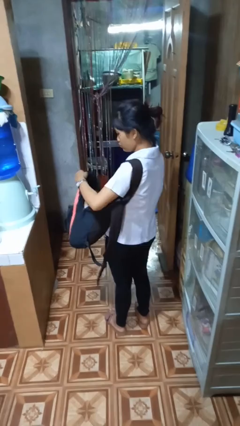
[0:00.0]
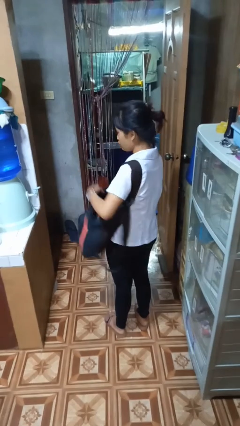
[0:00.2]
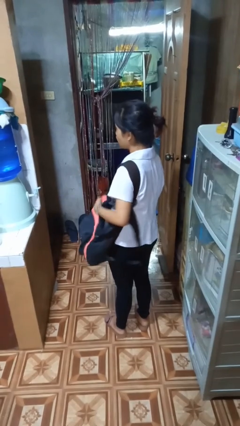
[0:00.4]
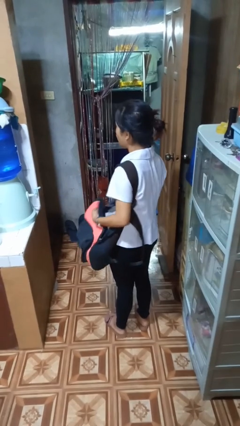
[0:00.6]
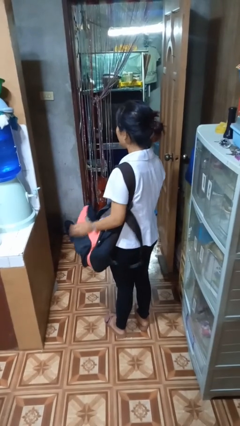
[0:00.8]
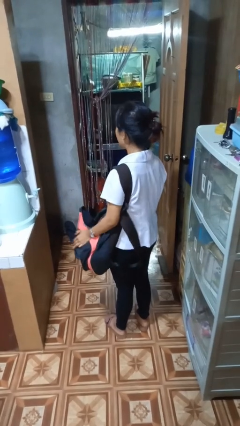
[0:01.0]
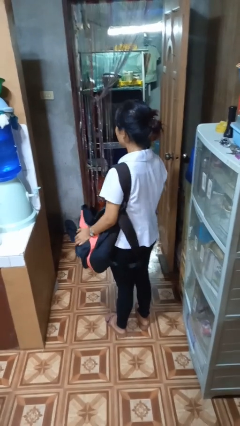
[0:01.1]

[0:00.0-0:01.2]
person puts object into backpack

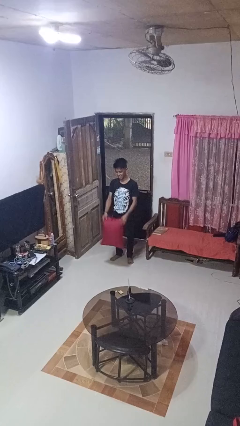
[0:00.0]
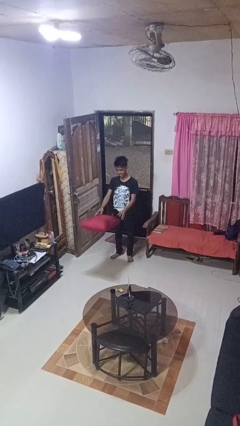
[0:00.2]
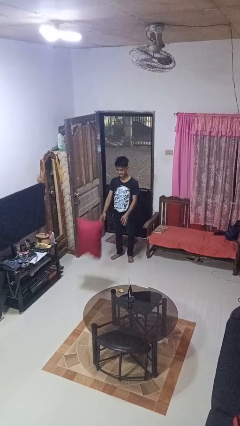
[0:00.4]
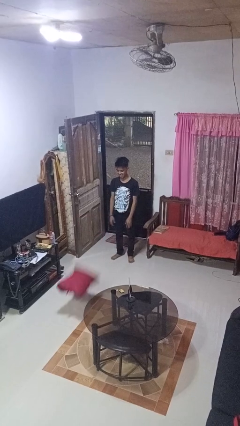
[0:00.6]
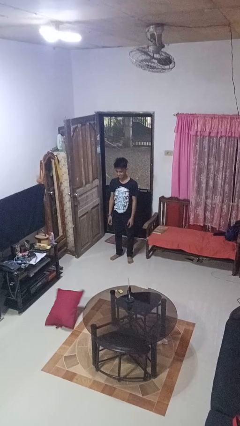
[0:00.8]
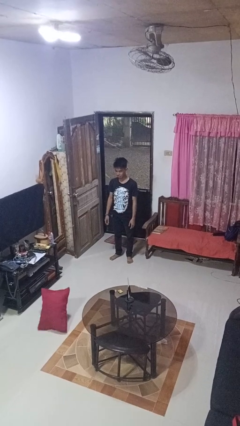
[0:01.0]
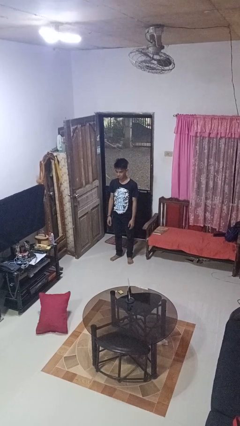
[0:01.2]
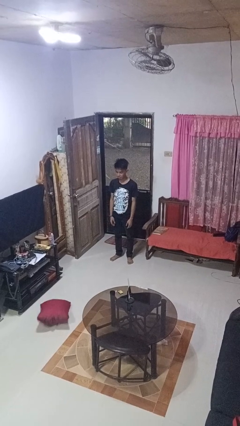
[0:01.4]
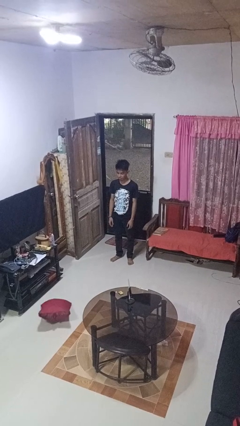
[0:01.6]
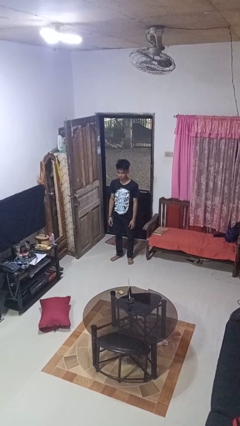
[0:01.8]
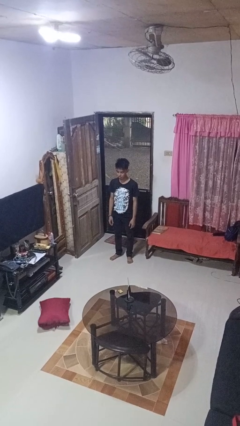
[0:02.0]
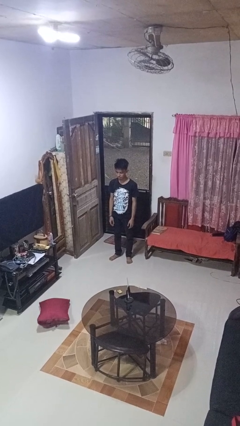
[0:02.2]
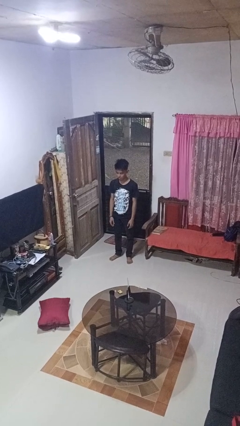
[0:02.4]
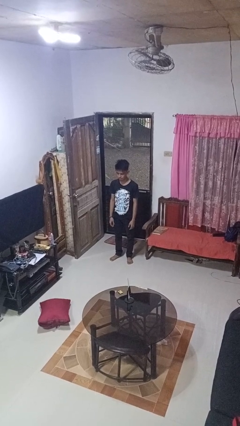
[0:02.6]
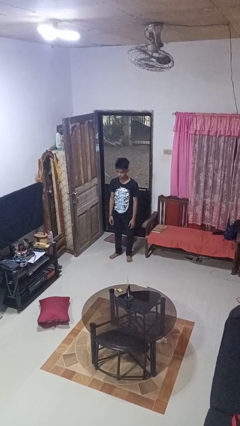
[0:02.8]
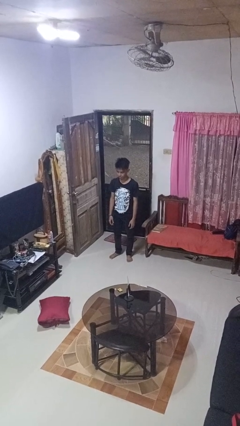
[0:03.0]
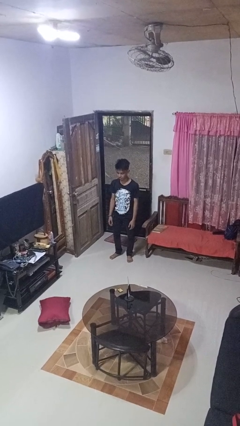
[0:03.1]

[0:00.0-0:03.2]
person throws object to ground

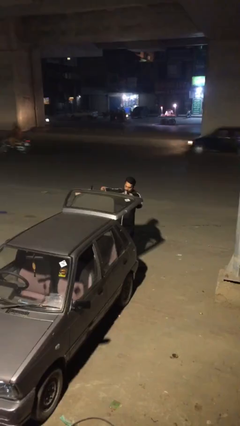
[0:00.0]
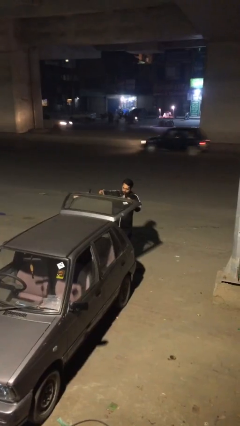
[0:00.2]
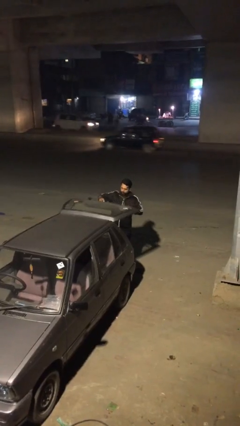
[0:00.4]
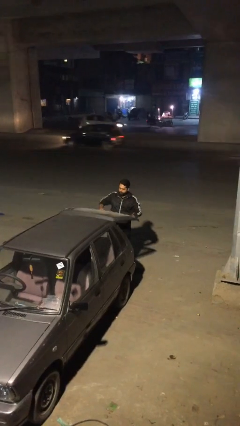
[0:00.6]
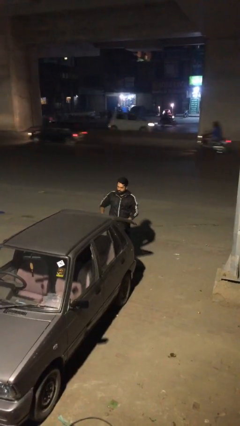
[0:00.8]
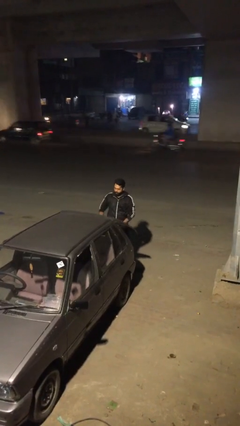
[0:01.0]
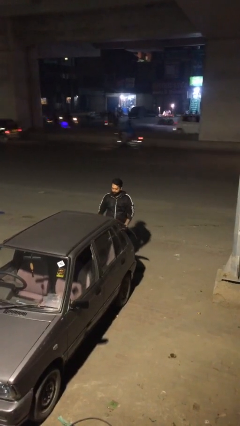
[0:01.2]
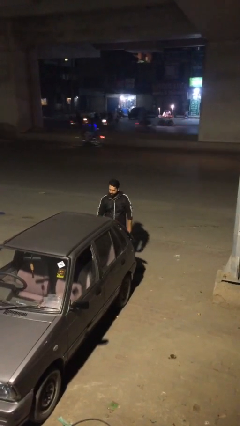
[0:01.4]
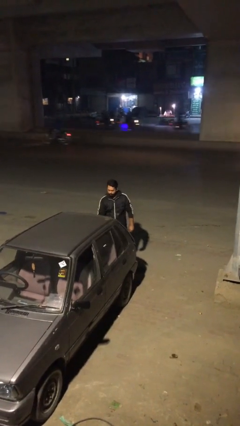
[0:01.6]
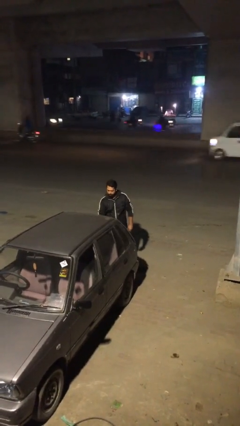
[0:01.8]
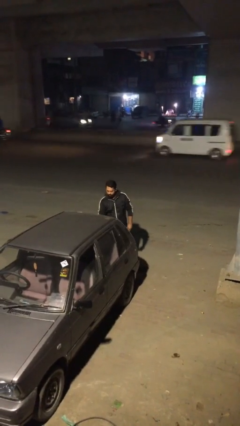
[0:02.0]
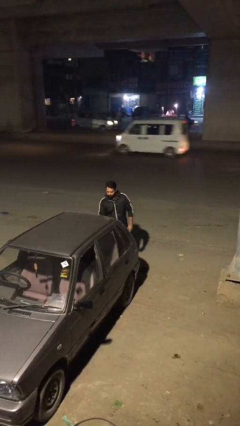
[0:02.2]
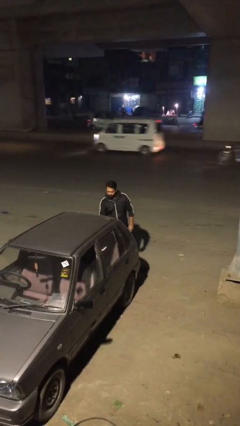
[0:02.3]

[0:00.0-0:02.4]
person closes car trunk

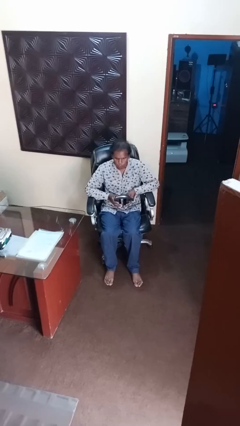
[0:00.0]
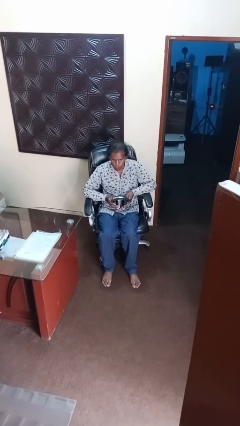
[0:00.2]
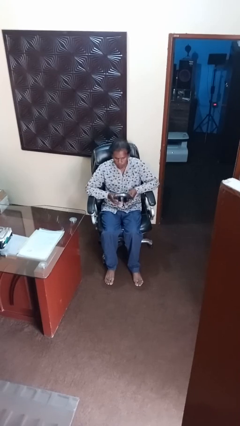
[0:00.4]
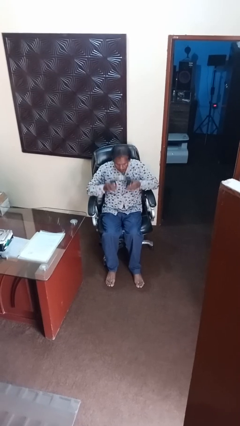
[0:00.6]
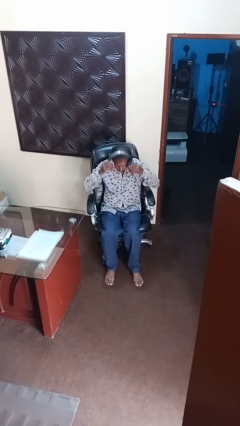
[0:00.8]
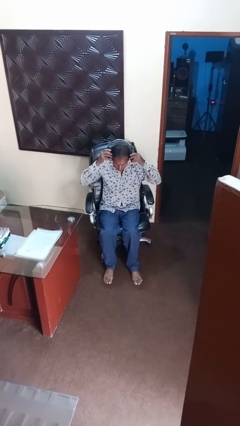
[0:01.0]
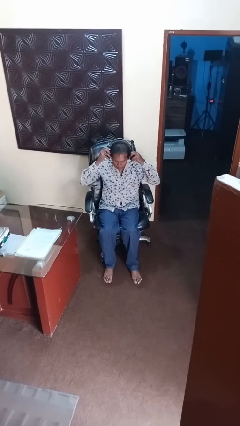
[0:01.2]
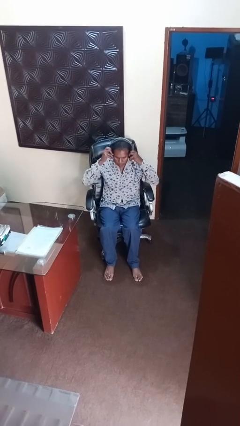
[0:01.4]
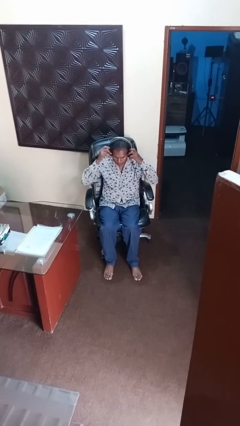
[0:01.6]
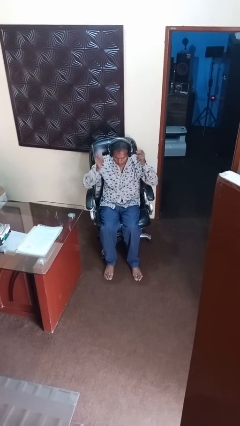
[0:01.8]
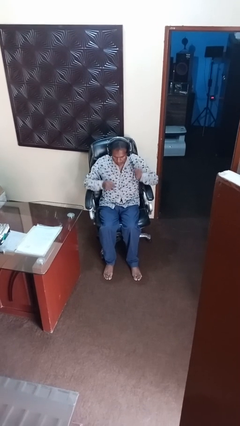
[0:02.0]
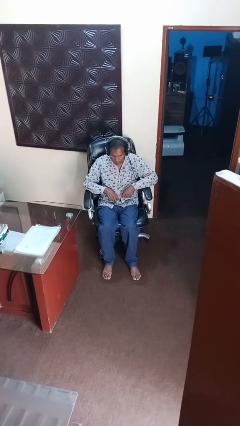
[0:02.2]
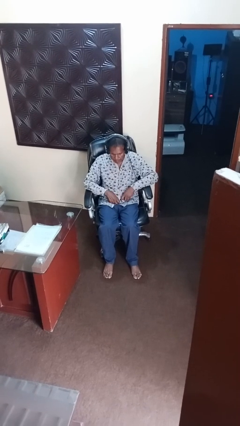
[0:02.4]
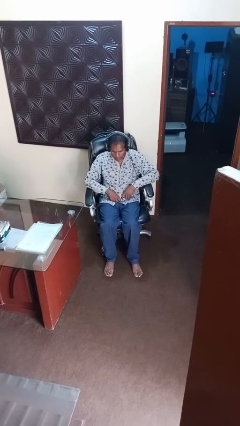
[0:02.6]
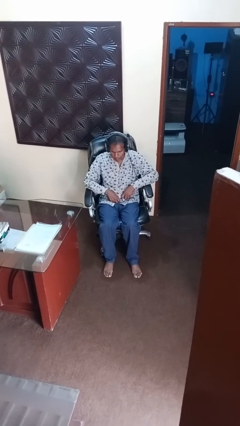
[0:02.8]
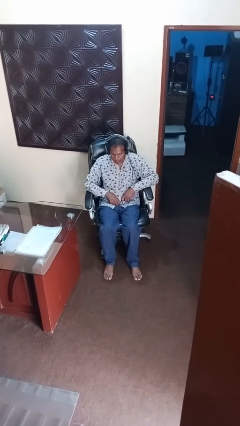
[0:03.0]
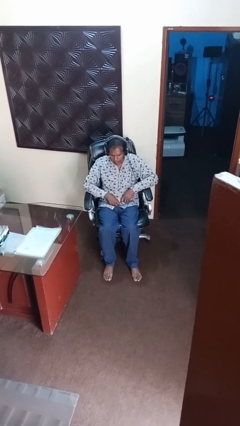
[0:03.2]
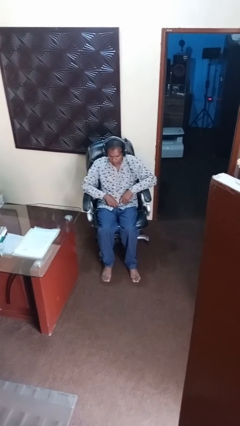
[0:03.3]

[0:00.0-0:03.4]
person puts on headphones

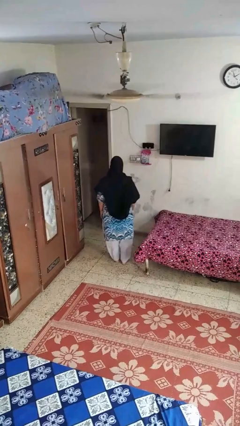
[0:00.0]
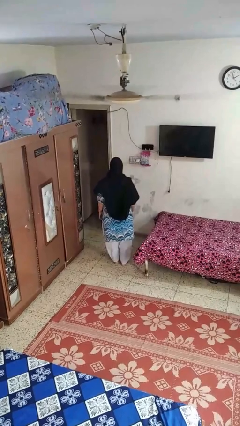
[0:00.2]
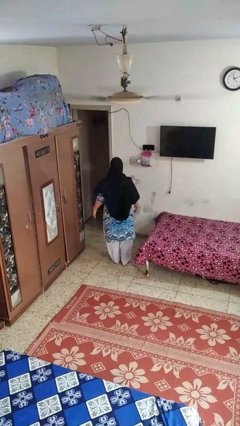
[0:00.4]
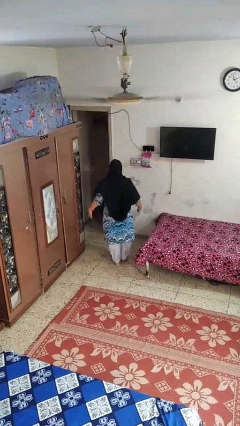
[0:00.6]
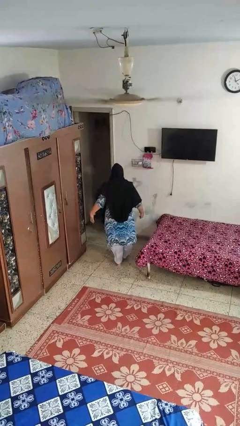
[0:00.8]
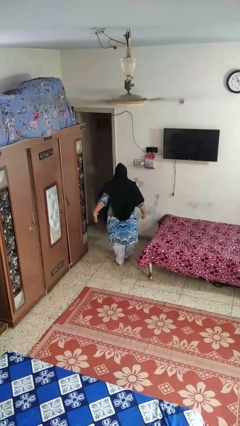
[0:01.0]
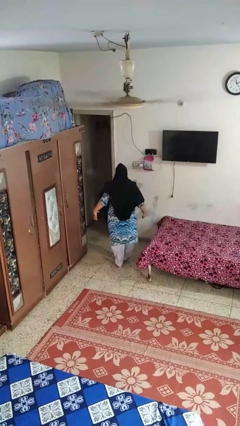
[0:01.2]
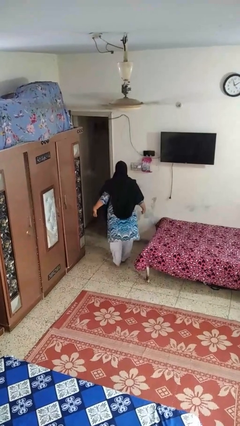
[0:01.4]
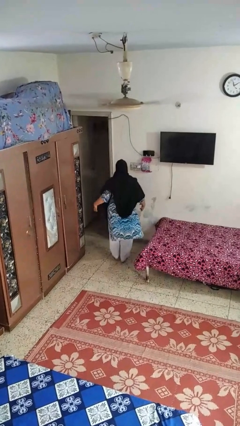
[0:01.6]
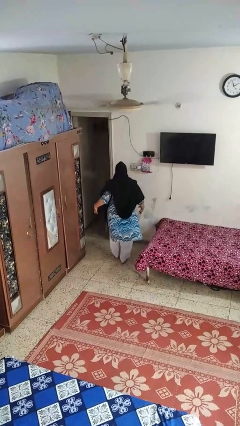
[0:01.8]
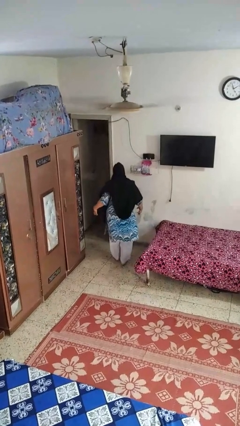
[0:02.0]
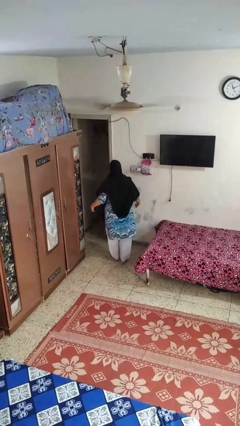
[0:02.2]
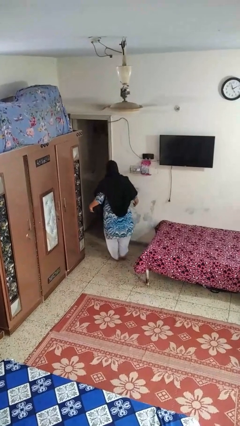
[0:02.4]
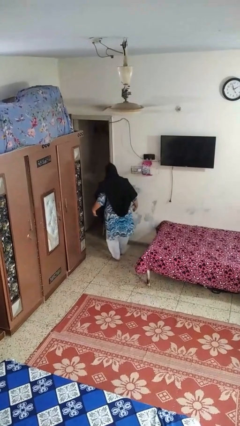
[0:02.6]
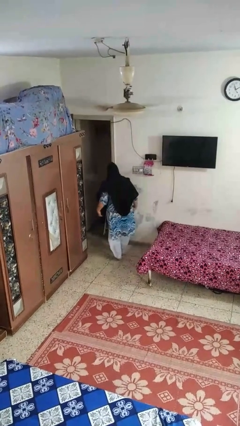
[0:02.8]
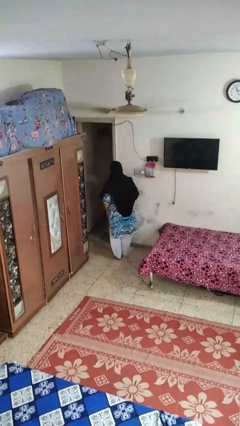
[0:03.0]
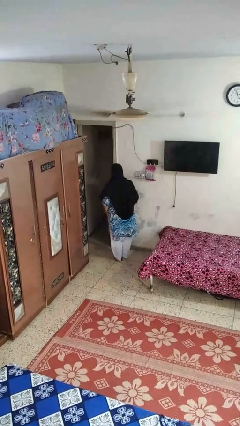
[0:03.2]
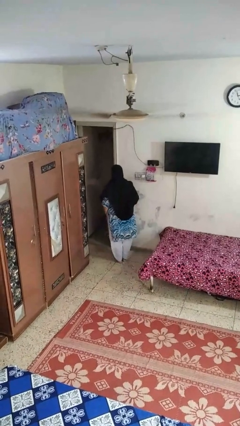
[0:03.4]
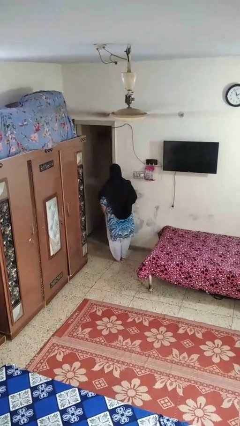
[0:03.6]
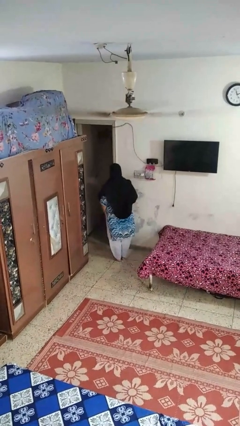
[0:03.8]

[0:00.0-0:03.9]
person walks tiptoe

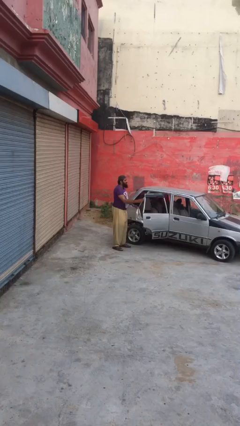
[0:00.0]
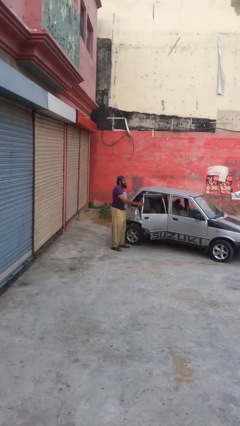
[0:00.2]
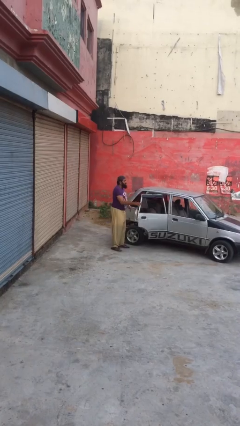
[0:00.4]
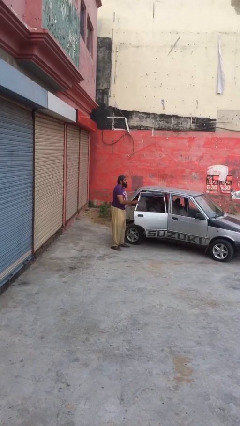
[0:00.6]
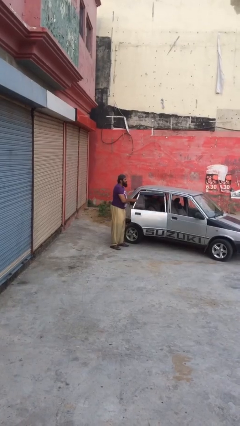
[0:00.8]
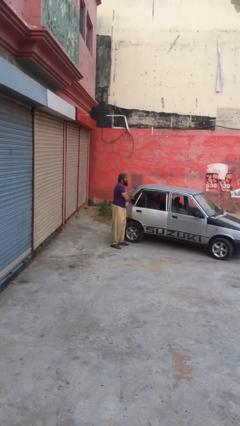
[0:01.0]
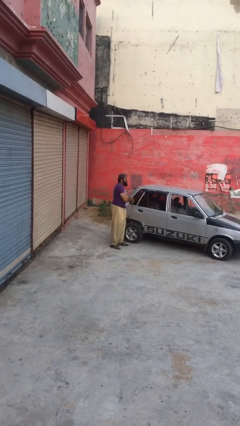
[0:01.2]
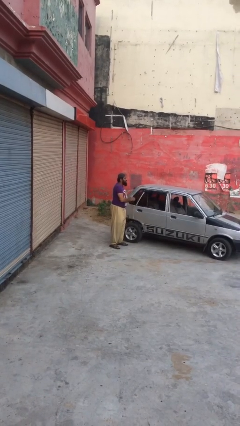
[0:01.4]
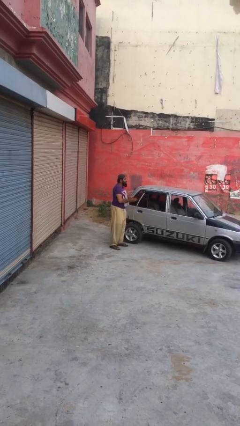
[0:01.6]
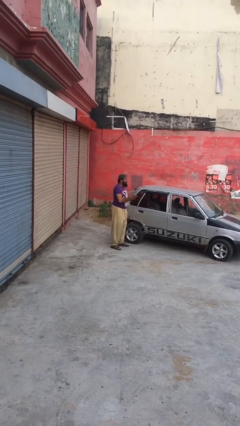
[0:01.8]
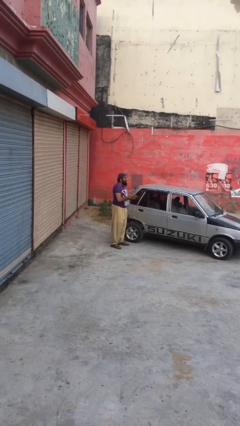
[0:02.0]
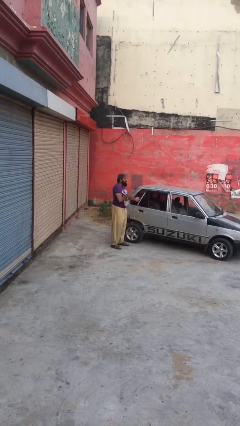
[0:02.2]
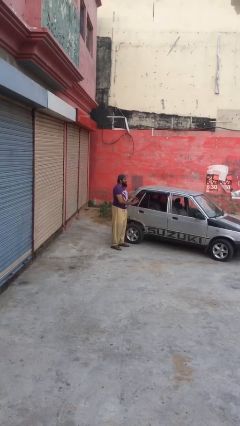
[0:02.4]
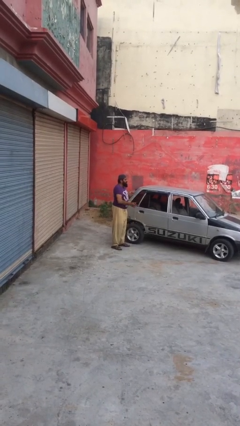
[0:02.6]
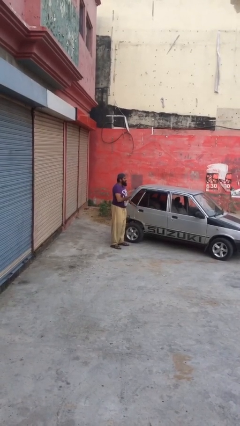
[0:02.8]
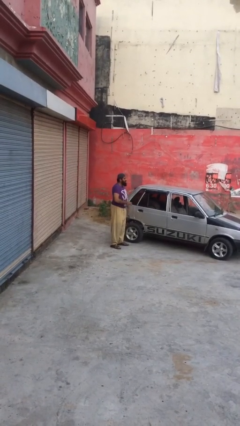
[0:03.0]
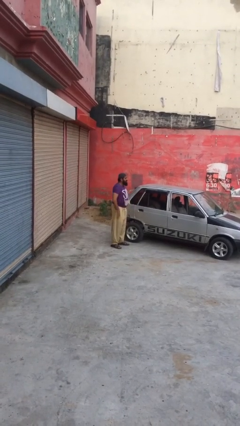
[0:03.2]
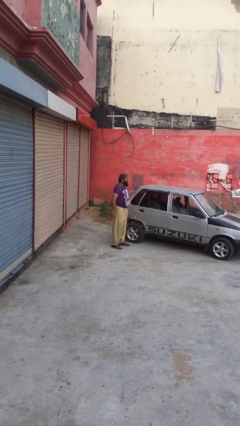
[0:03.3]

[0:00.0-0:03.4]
person closes car door
